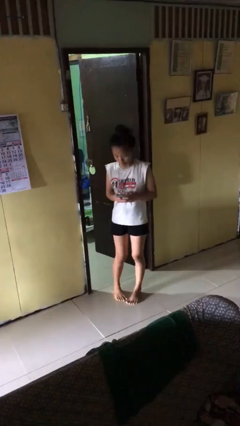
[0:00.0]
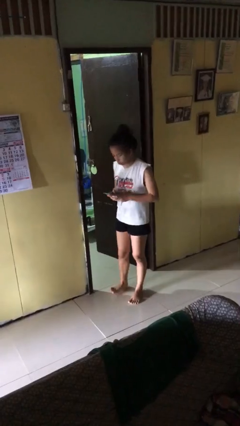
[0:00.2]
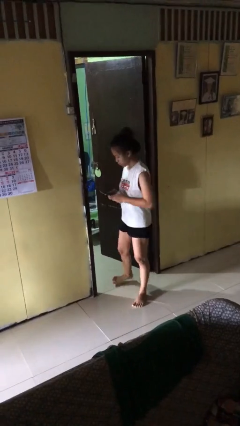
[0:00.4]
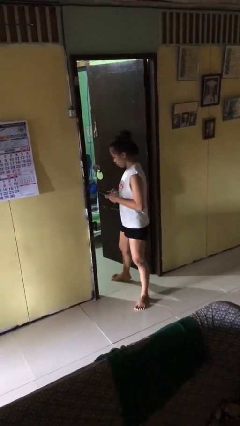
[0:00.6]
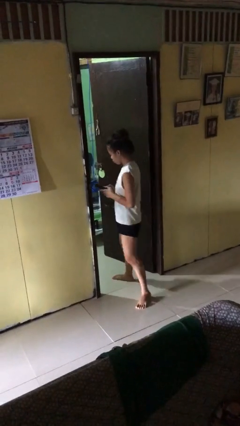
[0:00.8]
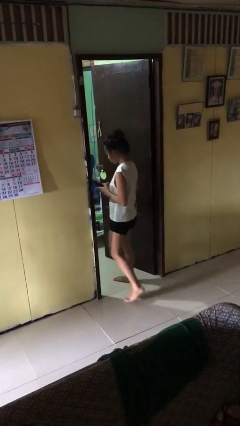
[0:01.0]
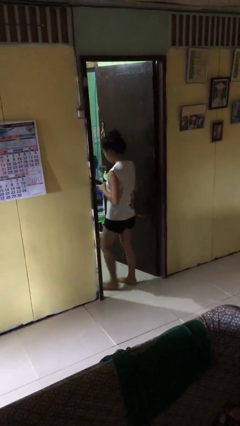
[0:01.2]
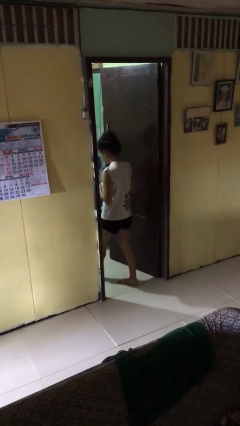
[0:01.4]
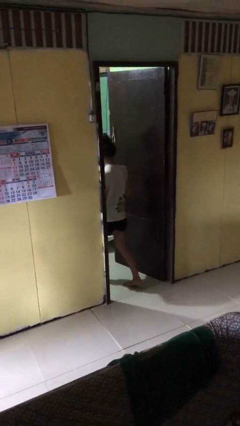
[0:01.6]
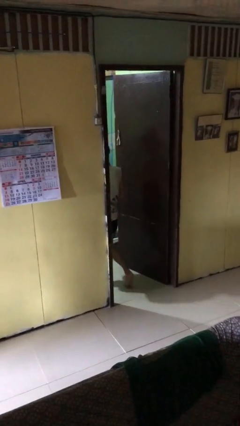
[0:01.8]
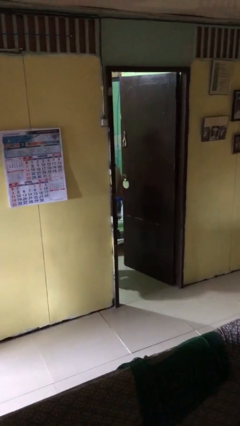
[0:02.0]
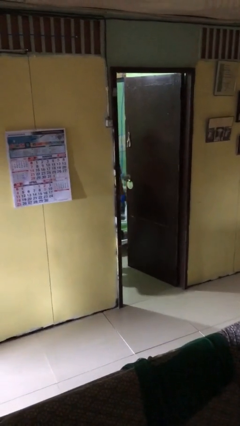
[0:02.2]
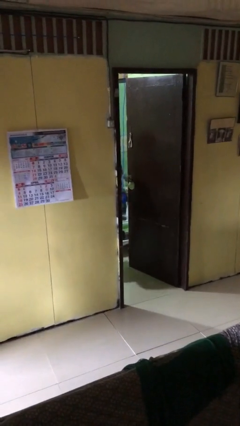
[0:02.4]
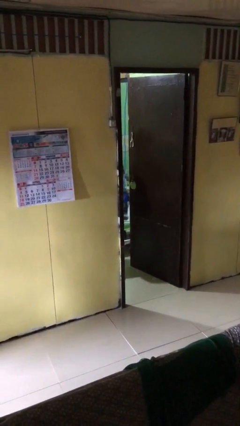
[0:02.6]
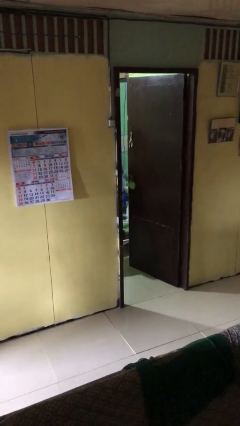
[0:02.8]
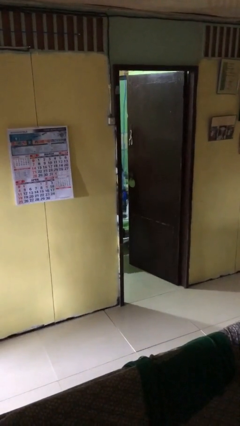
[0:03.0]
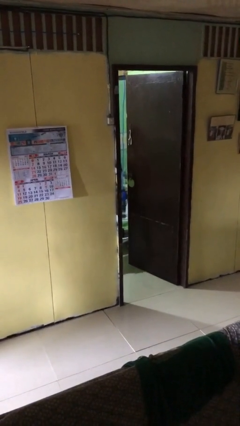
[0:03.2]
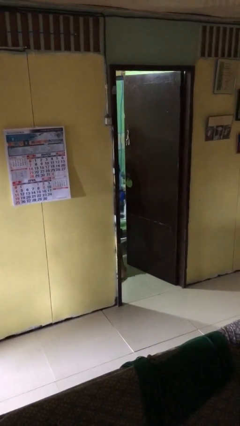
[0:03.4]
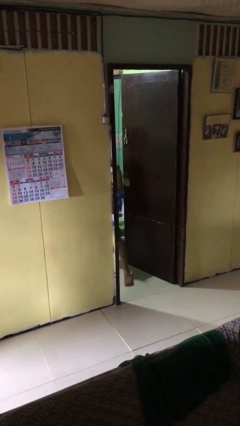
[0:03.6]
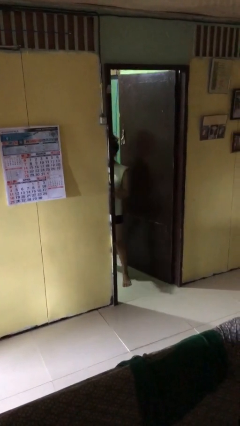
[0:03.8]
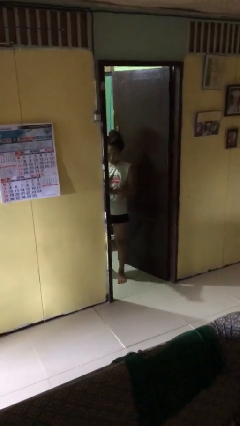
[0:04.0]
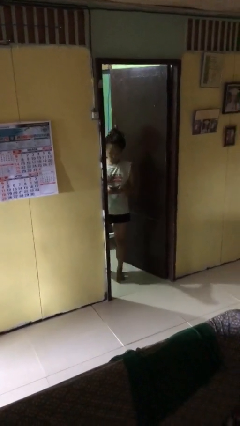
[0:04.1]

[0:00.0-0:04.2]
person exits scene through structure

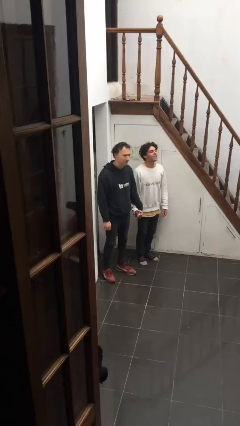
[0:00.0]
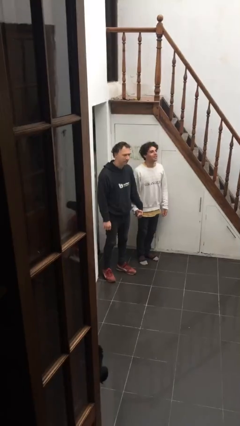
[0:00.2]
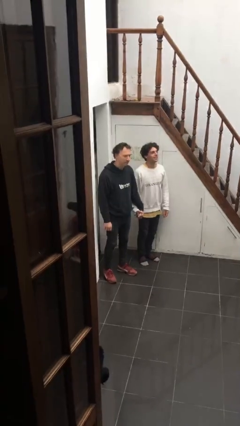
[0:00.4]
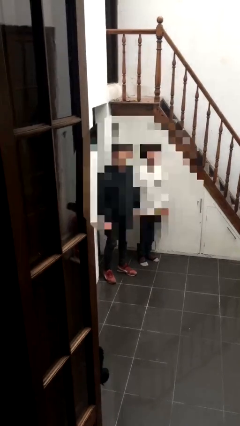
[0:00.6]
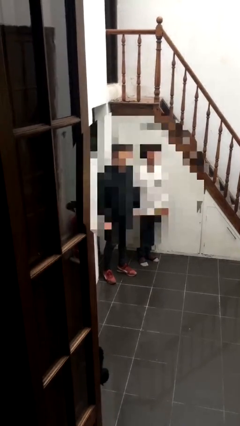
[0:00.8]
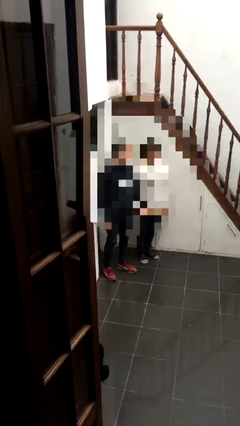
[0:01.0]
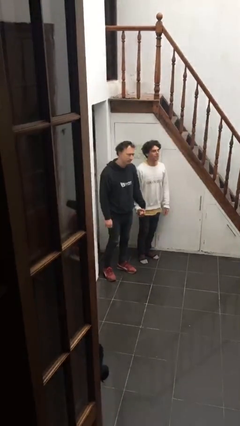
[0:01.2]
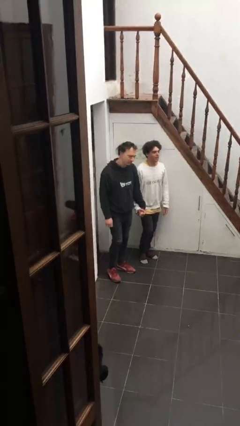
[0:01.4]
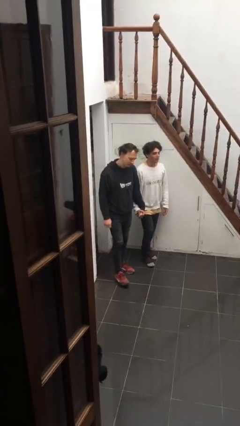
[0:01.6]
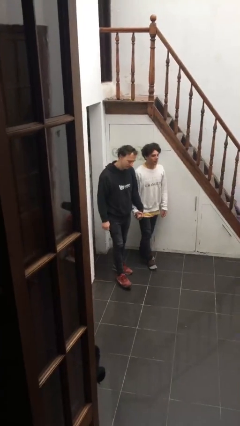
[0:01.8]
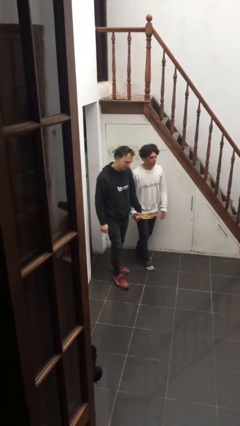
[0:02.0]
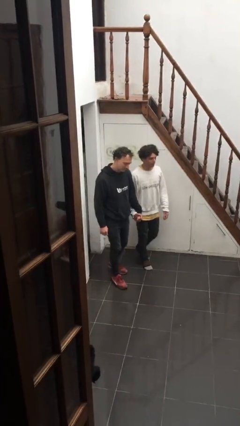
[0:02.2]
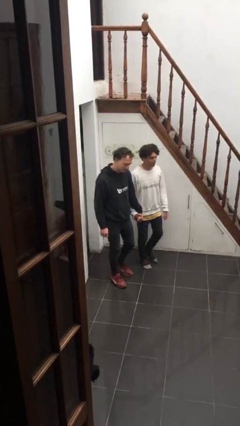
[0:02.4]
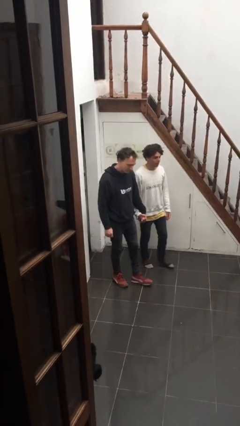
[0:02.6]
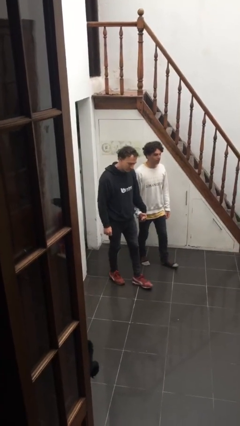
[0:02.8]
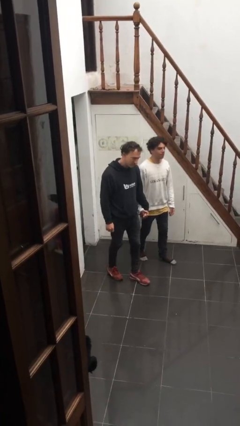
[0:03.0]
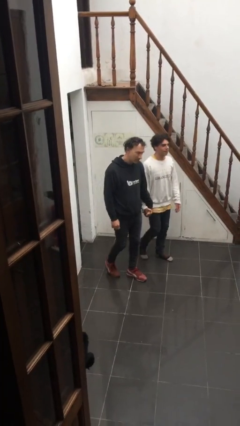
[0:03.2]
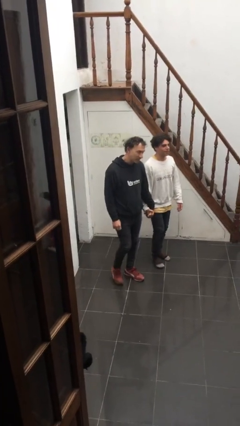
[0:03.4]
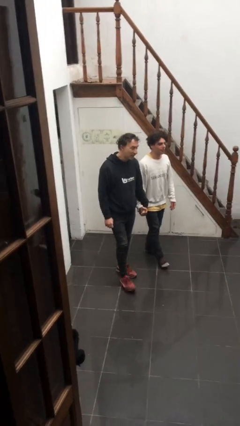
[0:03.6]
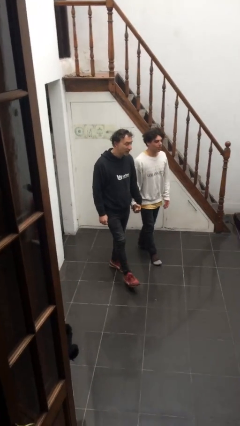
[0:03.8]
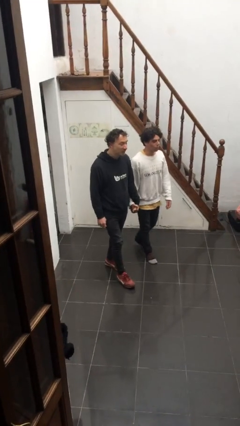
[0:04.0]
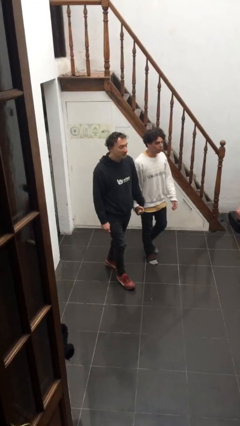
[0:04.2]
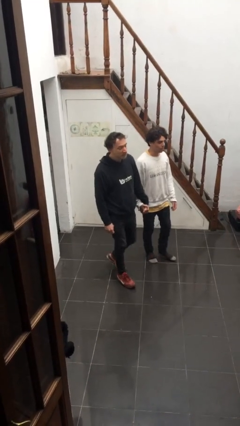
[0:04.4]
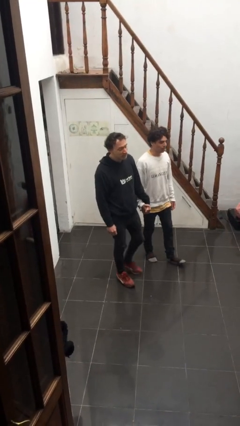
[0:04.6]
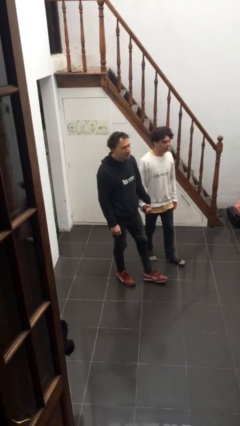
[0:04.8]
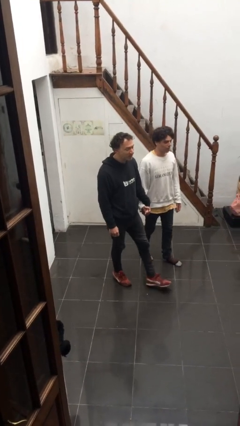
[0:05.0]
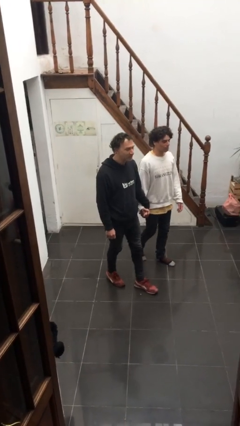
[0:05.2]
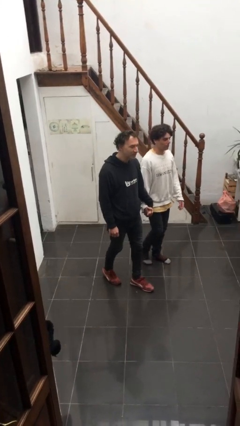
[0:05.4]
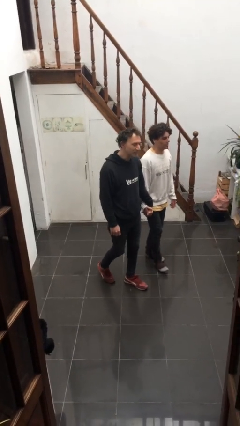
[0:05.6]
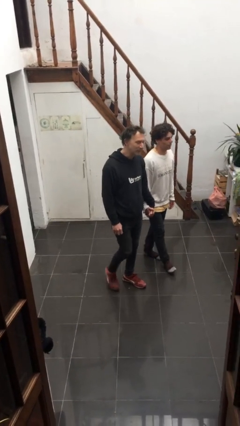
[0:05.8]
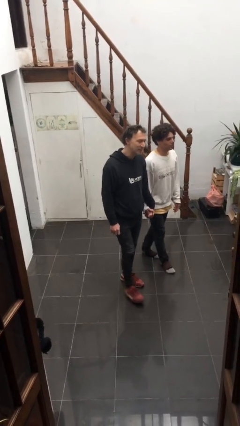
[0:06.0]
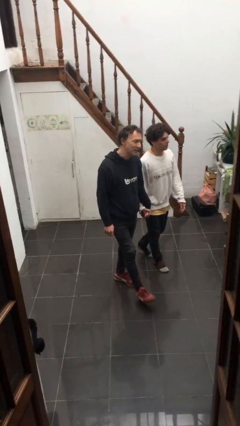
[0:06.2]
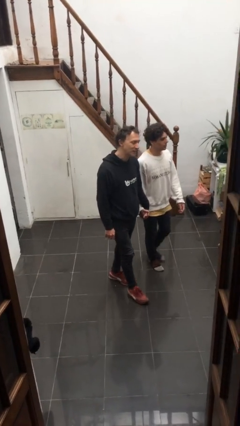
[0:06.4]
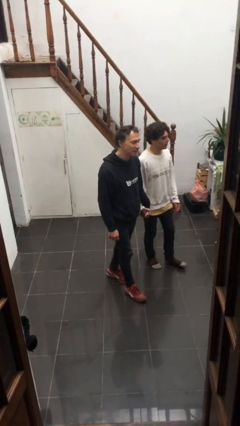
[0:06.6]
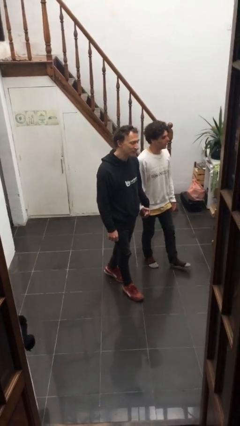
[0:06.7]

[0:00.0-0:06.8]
person holds hand

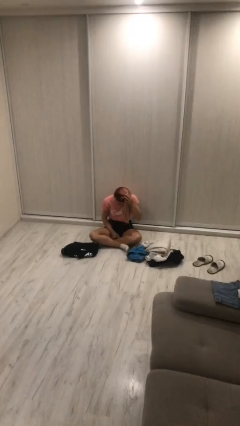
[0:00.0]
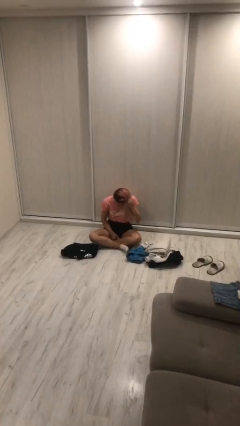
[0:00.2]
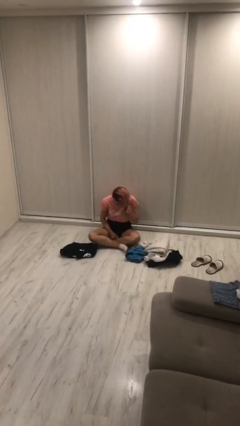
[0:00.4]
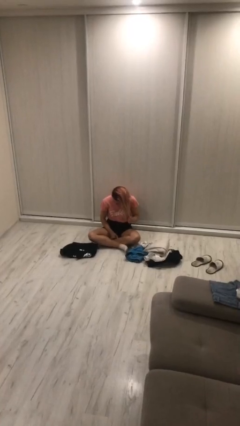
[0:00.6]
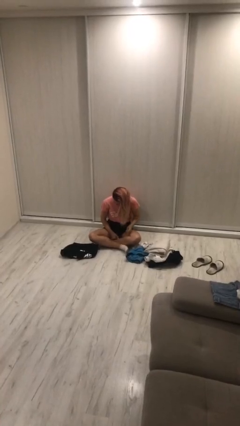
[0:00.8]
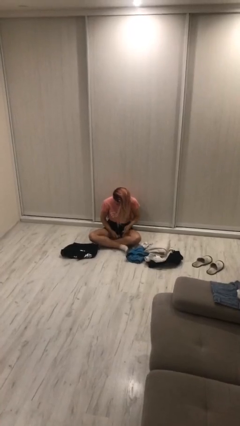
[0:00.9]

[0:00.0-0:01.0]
person takes off hairtie

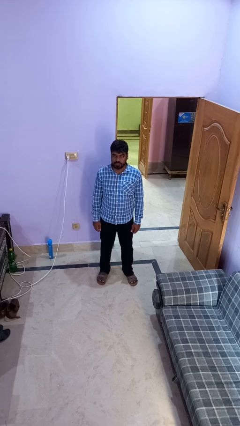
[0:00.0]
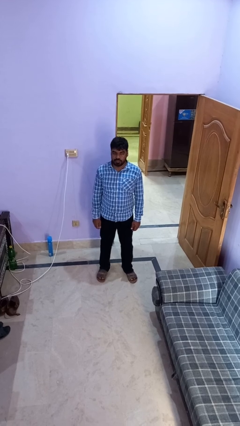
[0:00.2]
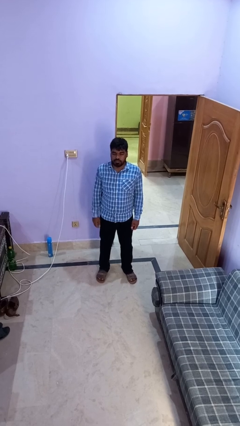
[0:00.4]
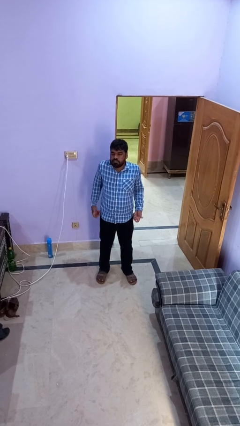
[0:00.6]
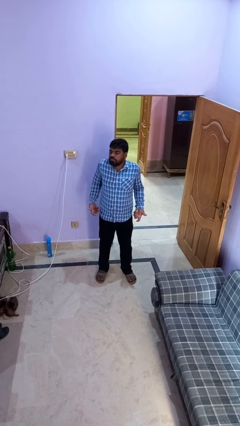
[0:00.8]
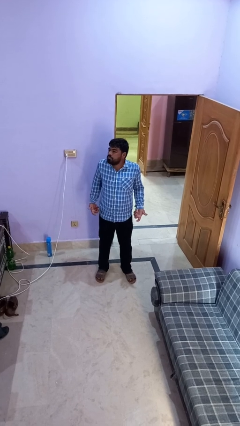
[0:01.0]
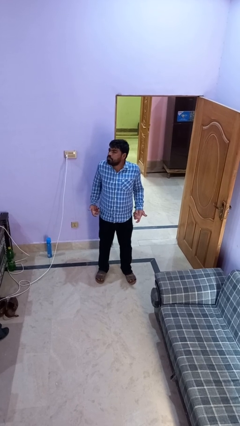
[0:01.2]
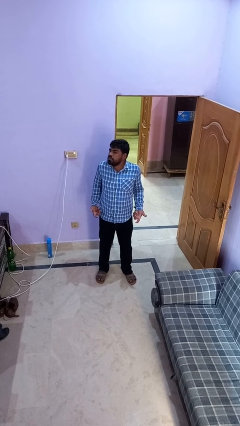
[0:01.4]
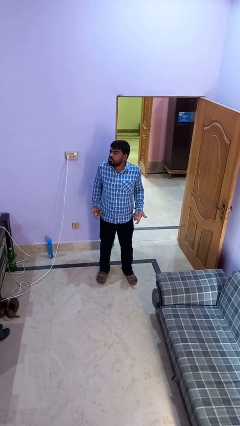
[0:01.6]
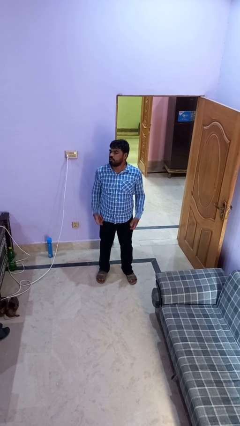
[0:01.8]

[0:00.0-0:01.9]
person shrugs

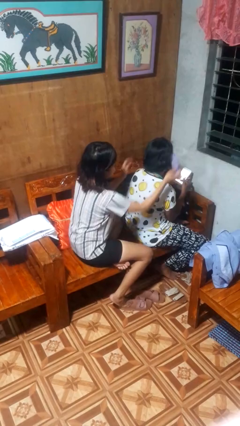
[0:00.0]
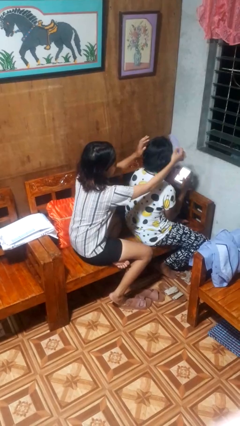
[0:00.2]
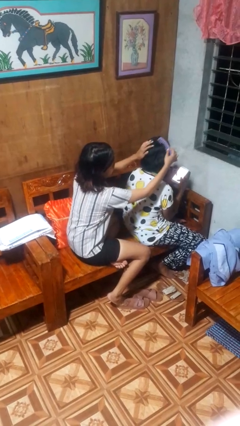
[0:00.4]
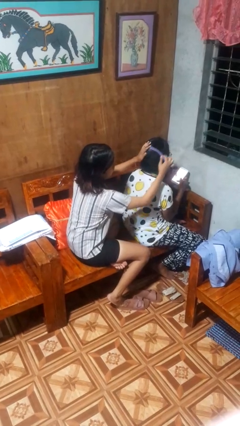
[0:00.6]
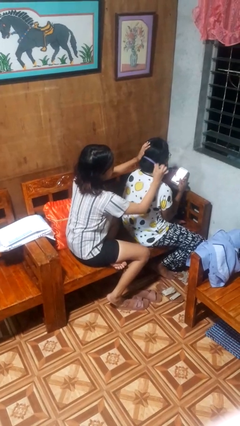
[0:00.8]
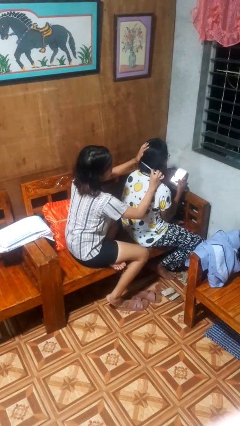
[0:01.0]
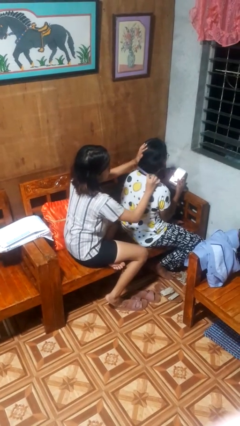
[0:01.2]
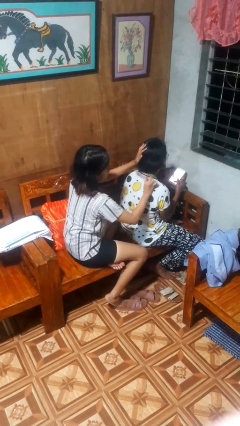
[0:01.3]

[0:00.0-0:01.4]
person brushes hair of person

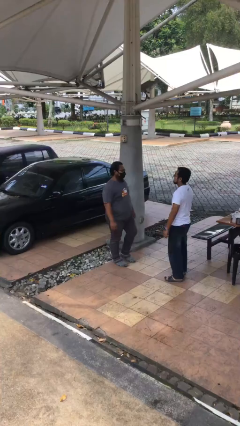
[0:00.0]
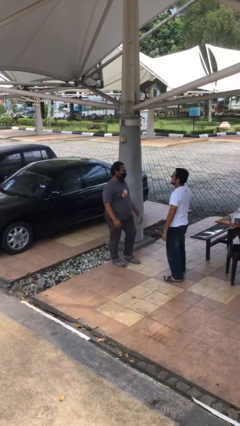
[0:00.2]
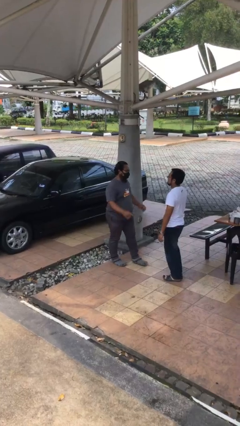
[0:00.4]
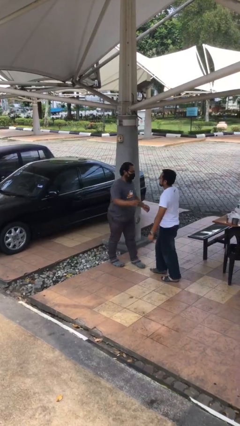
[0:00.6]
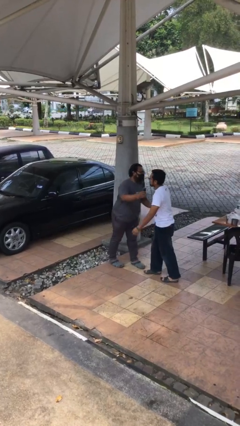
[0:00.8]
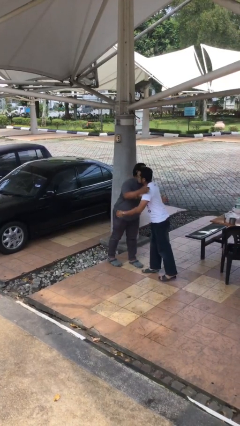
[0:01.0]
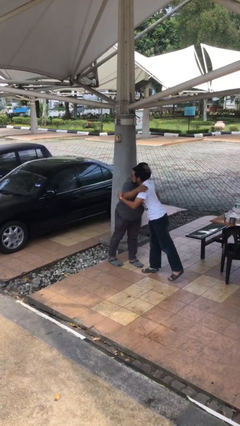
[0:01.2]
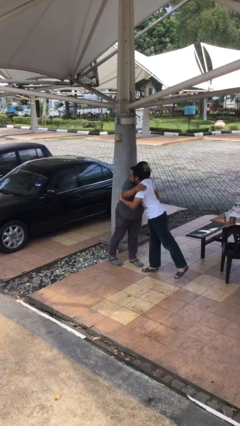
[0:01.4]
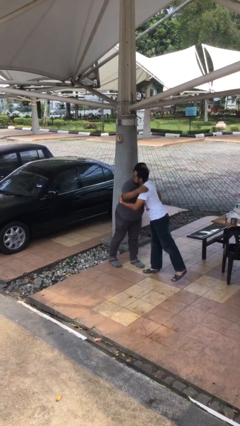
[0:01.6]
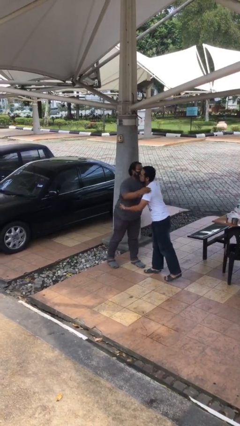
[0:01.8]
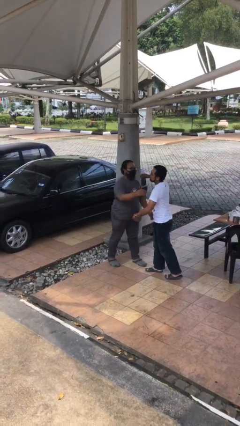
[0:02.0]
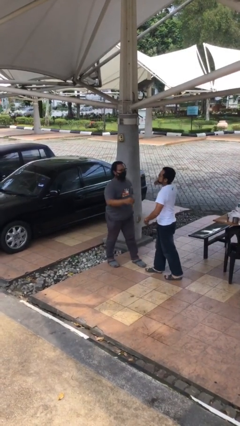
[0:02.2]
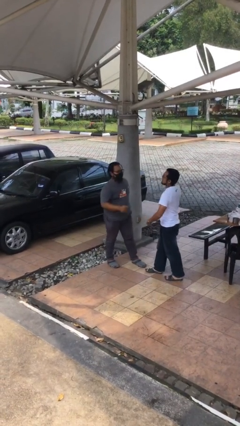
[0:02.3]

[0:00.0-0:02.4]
person embraces person
